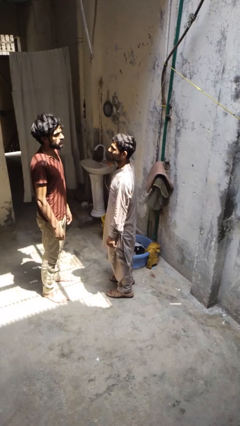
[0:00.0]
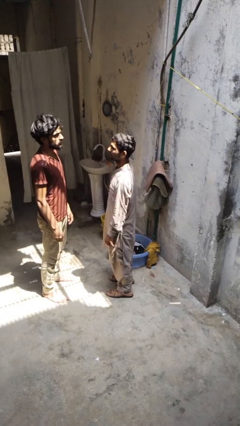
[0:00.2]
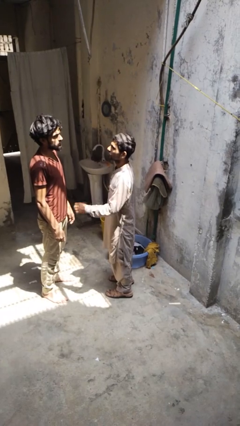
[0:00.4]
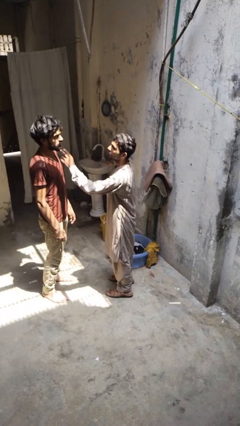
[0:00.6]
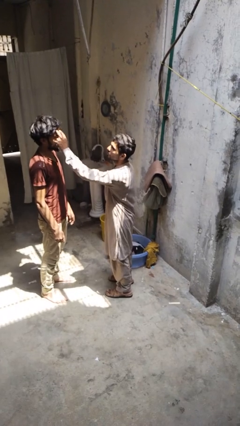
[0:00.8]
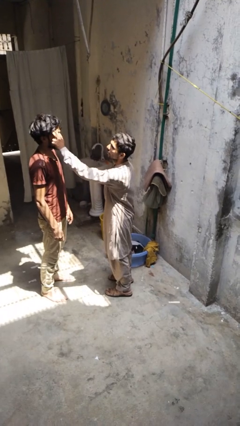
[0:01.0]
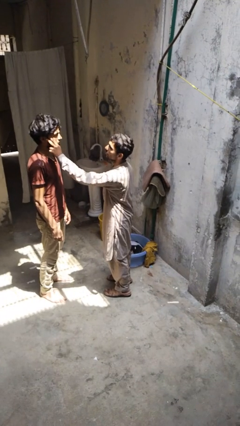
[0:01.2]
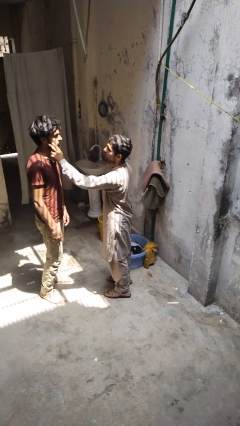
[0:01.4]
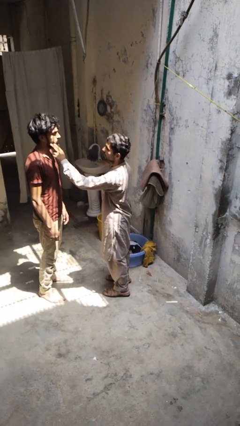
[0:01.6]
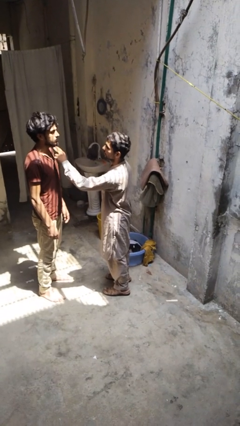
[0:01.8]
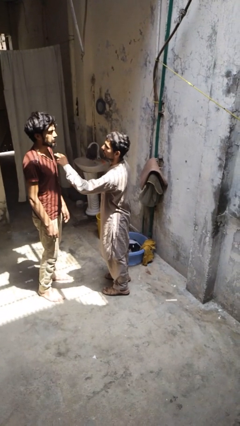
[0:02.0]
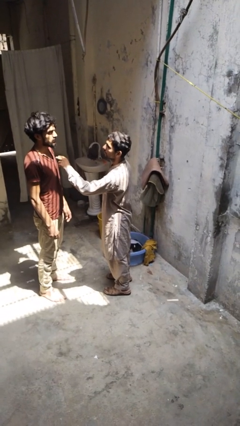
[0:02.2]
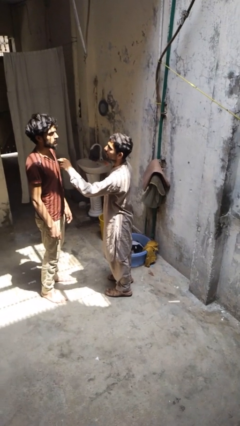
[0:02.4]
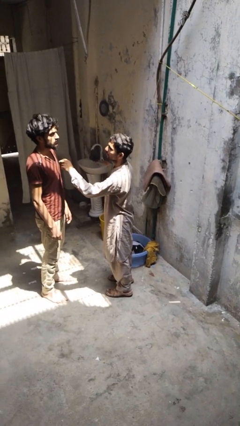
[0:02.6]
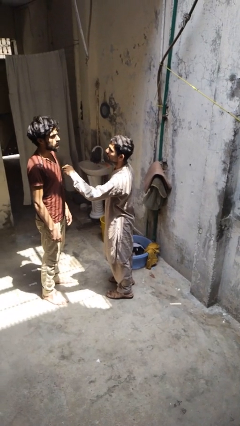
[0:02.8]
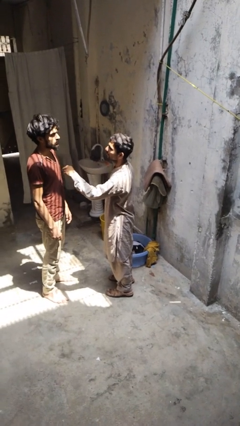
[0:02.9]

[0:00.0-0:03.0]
person touches face of person

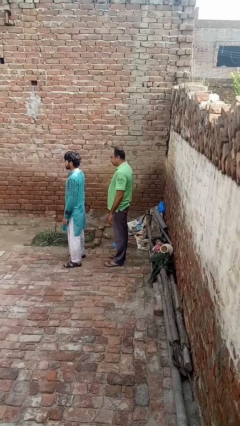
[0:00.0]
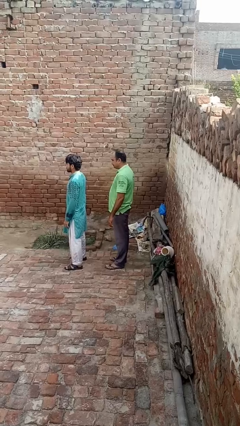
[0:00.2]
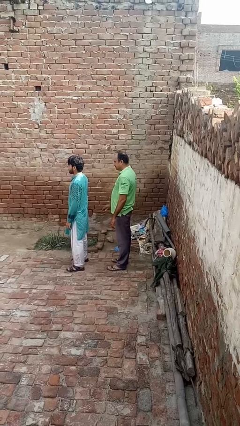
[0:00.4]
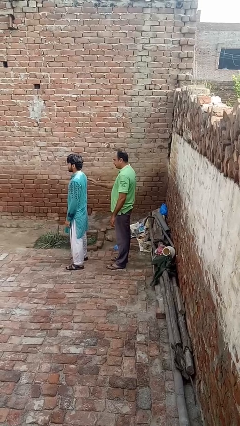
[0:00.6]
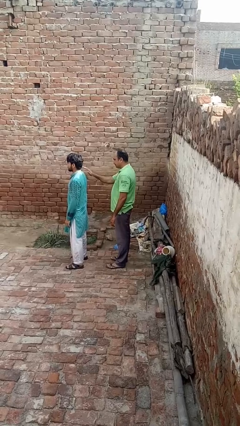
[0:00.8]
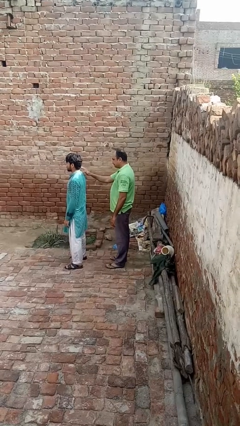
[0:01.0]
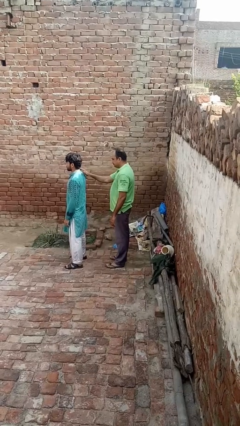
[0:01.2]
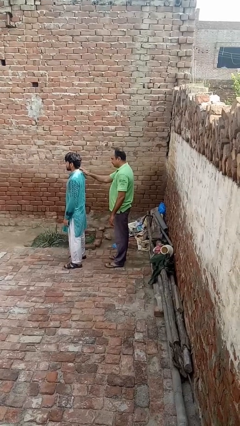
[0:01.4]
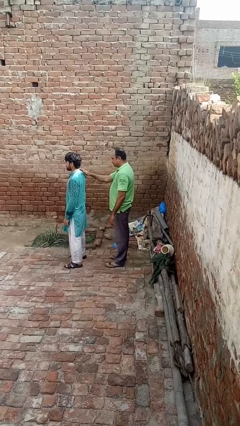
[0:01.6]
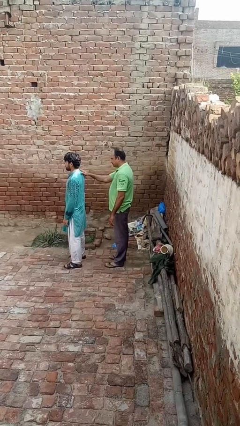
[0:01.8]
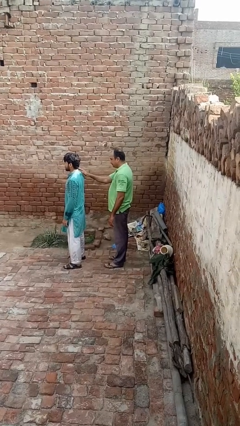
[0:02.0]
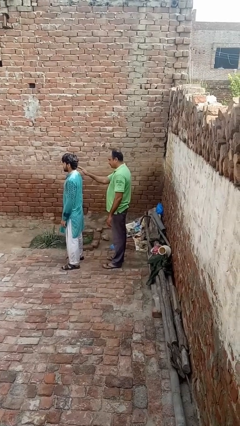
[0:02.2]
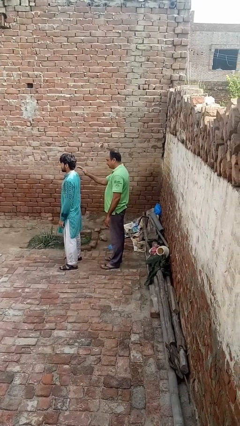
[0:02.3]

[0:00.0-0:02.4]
person touches back of person

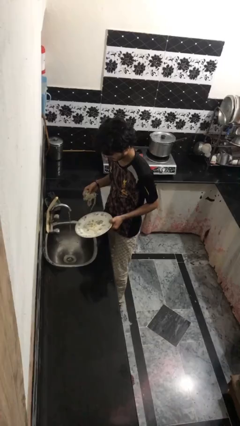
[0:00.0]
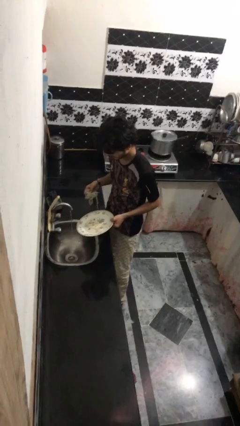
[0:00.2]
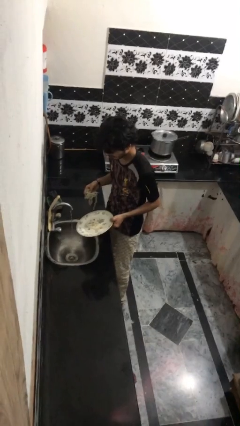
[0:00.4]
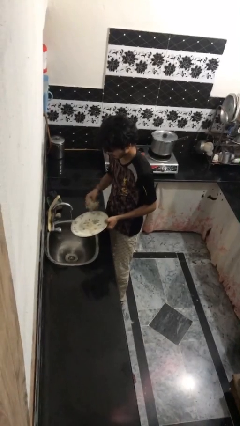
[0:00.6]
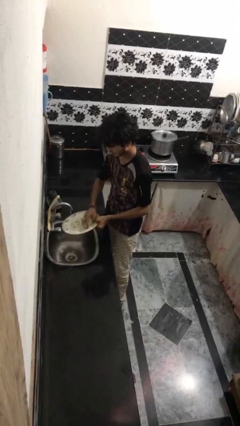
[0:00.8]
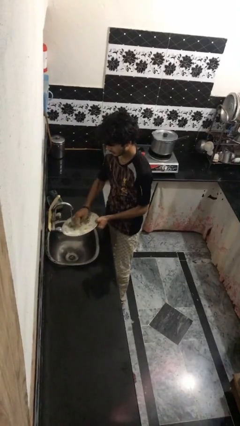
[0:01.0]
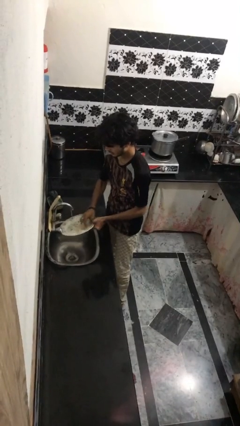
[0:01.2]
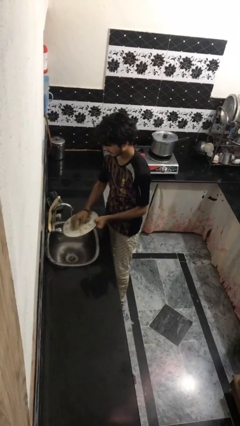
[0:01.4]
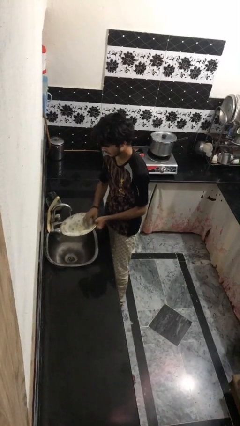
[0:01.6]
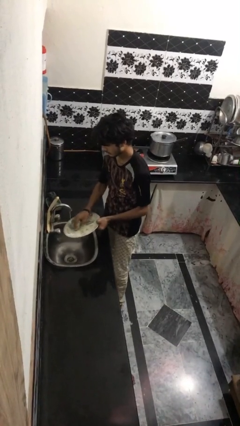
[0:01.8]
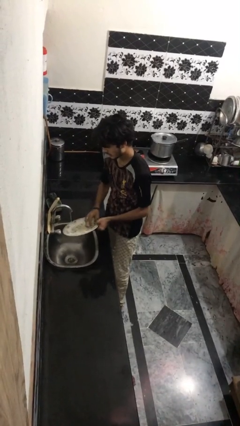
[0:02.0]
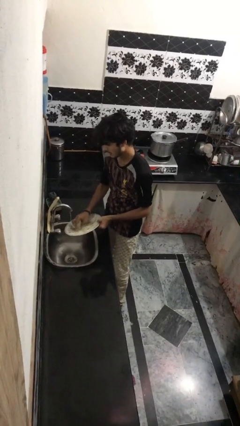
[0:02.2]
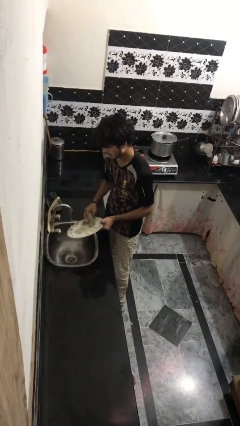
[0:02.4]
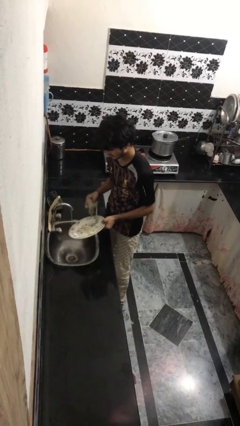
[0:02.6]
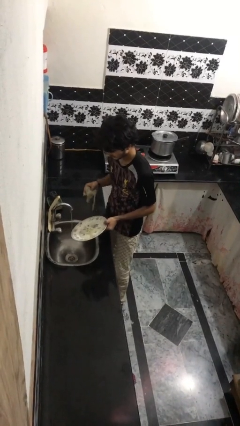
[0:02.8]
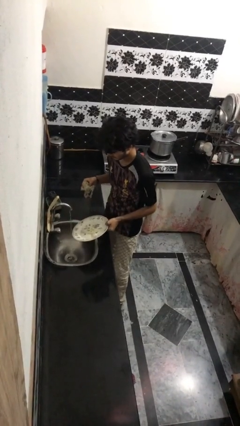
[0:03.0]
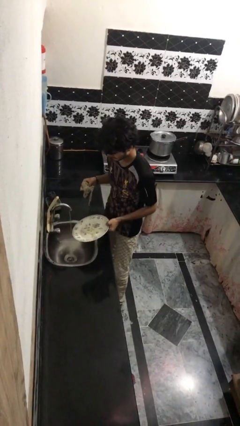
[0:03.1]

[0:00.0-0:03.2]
person washes dish

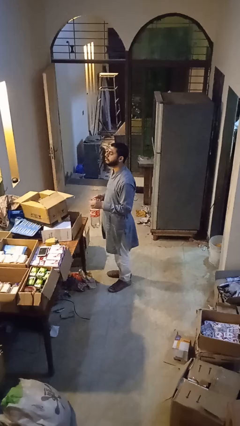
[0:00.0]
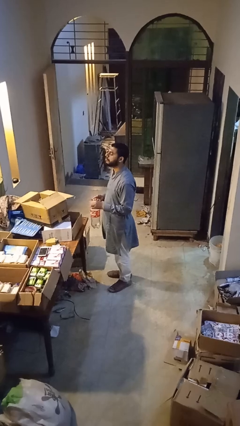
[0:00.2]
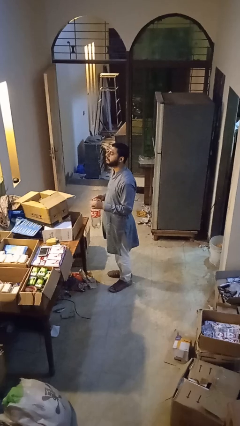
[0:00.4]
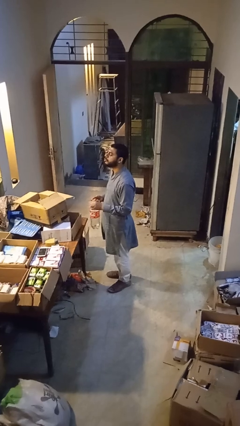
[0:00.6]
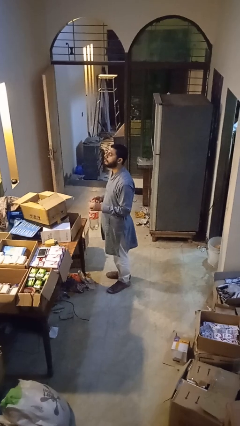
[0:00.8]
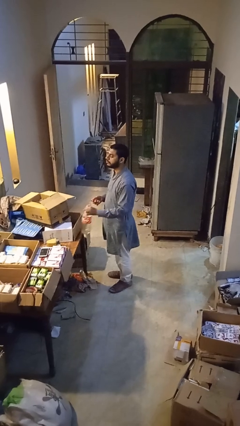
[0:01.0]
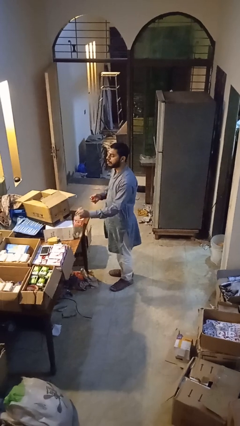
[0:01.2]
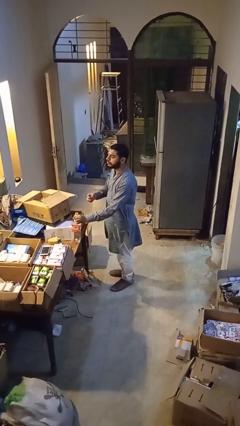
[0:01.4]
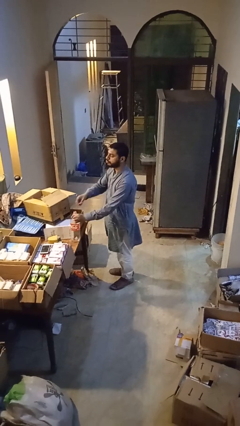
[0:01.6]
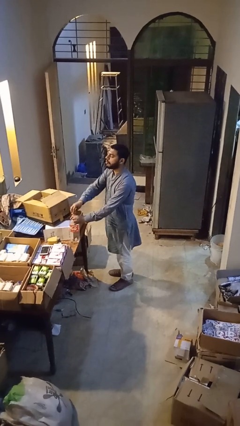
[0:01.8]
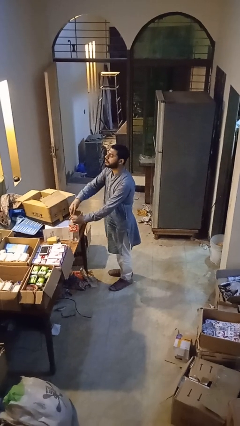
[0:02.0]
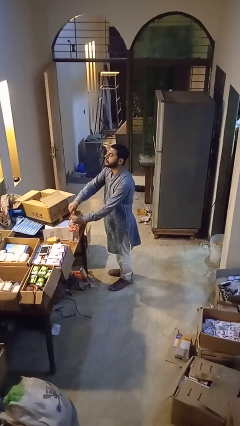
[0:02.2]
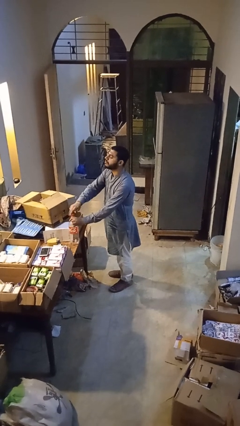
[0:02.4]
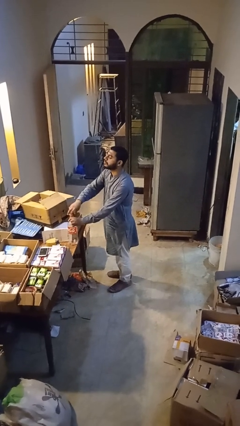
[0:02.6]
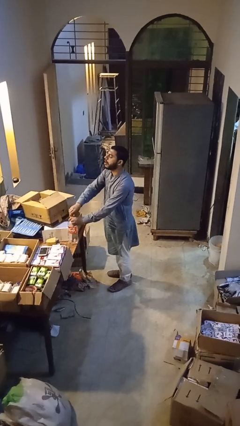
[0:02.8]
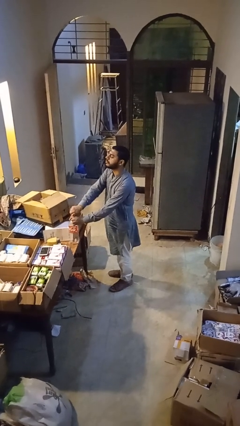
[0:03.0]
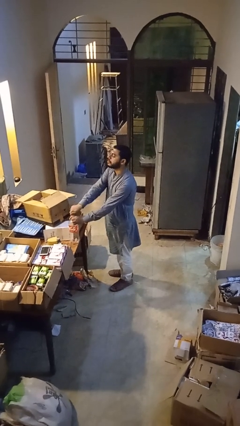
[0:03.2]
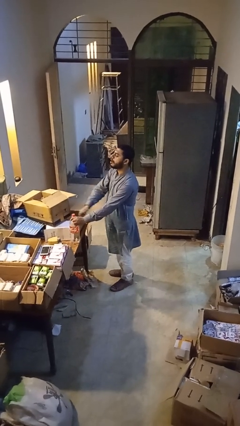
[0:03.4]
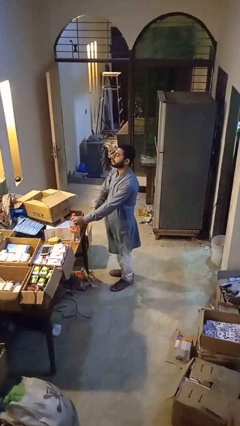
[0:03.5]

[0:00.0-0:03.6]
person screws lid to bottle

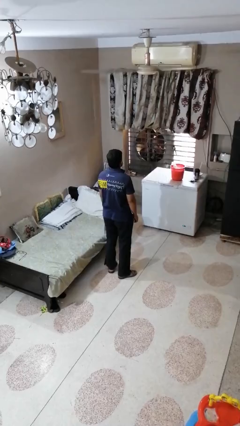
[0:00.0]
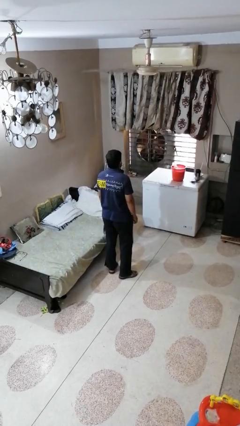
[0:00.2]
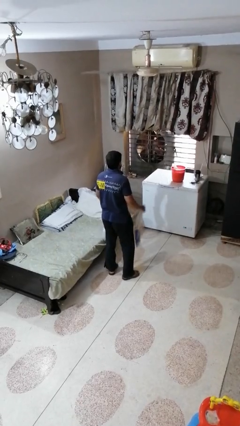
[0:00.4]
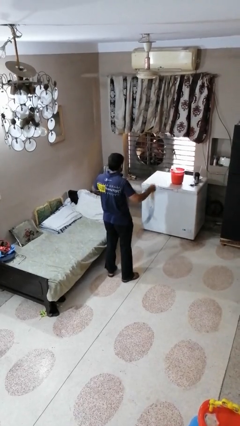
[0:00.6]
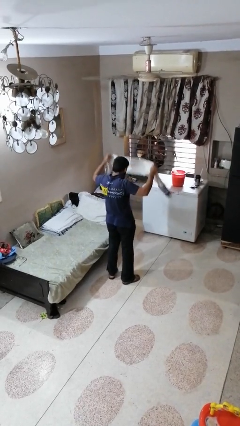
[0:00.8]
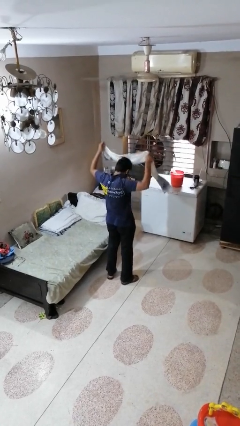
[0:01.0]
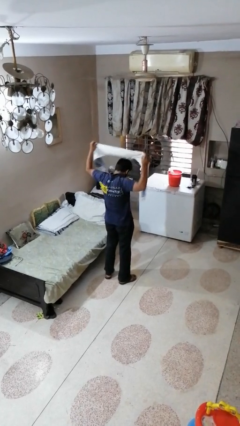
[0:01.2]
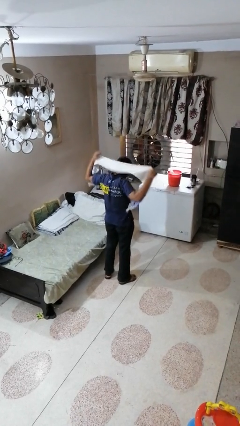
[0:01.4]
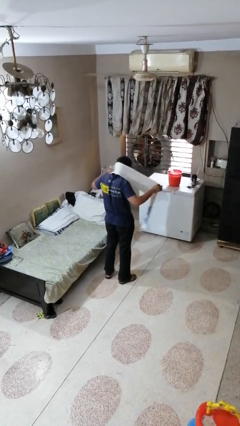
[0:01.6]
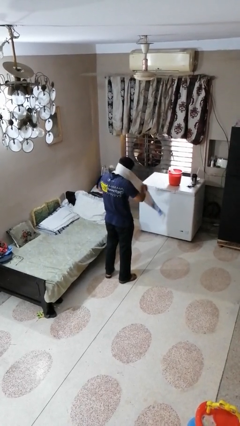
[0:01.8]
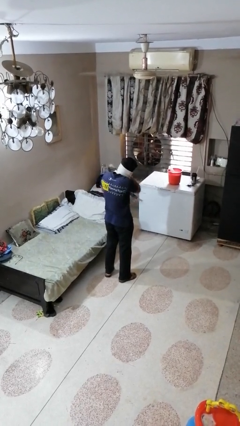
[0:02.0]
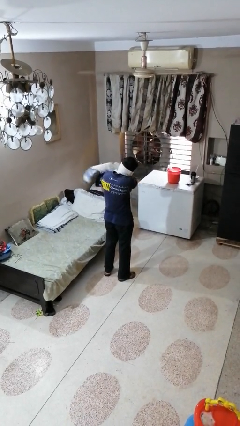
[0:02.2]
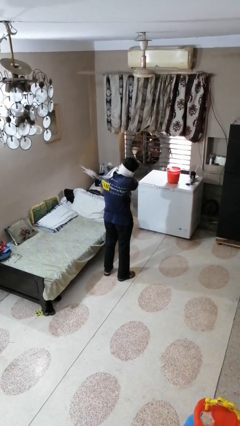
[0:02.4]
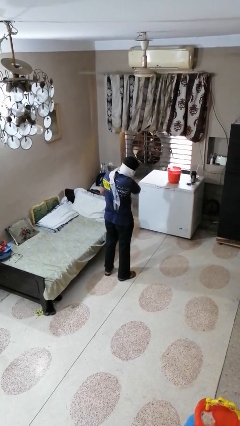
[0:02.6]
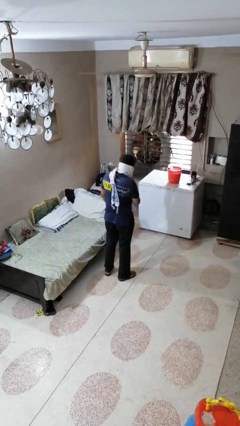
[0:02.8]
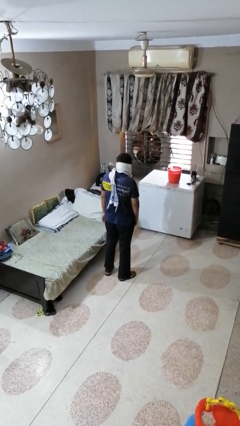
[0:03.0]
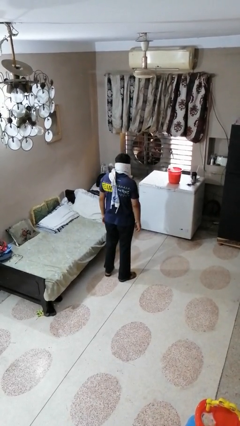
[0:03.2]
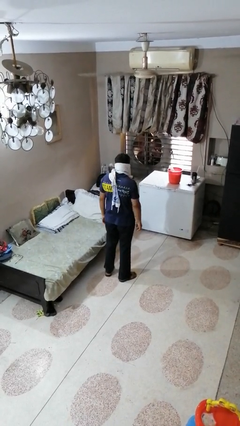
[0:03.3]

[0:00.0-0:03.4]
person puts on scarf

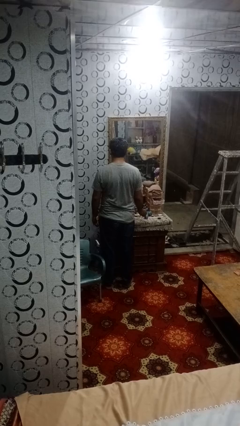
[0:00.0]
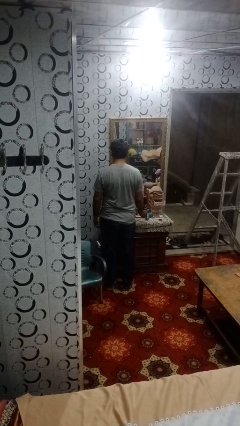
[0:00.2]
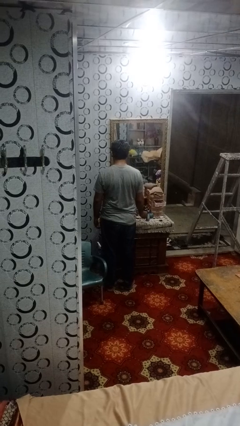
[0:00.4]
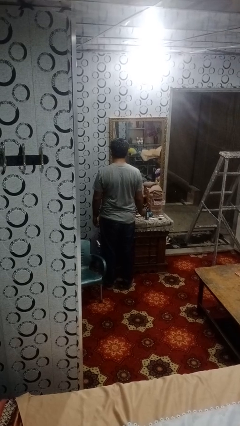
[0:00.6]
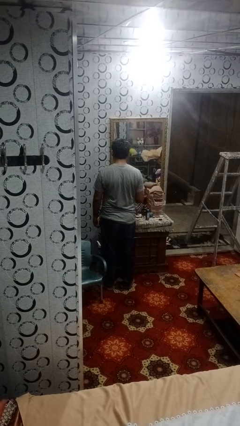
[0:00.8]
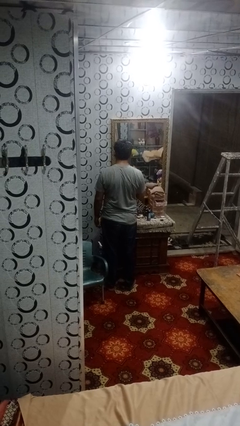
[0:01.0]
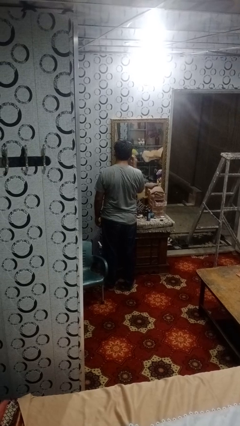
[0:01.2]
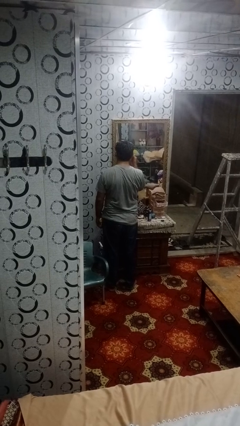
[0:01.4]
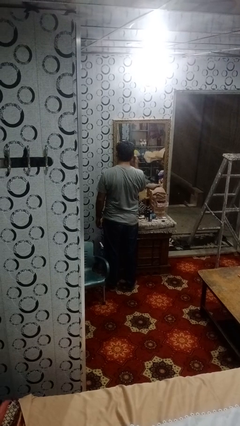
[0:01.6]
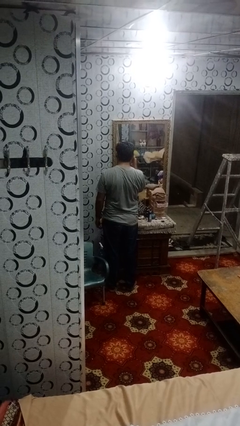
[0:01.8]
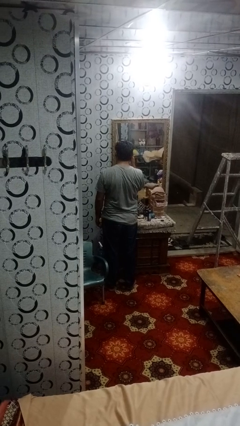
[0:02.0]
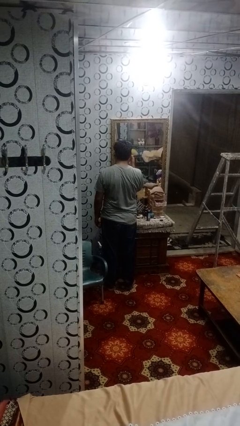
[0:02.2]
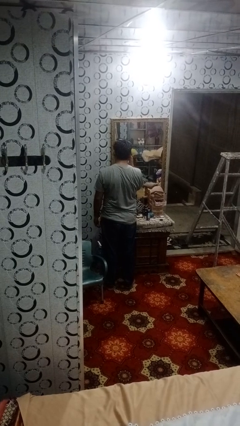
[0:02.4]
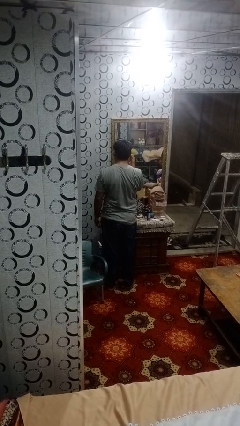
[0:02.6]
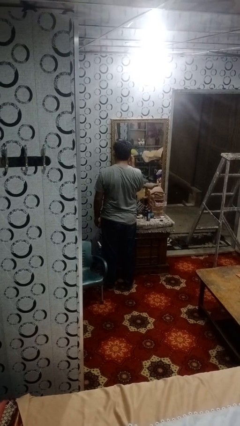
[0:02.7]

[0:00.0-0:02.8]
person applies eye makeup
